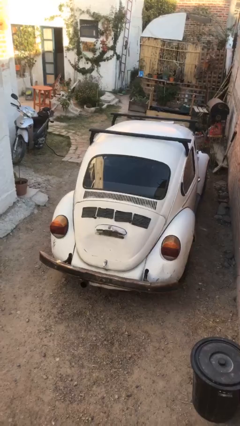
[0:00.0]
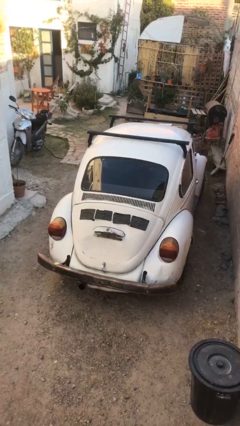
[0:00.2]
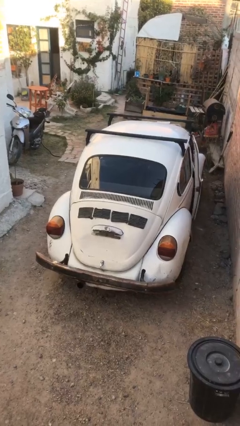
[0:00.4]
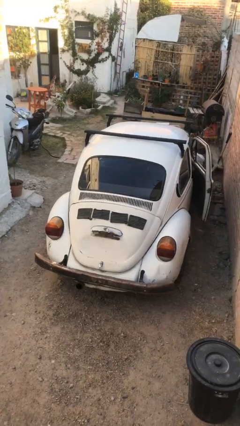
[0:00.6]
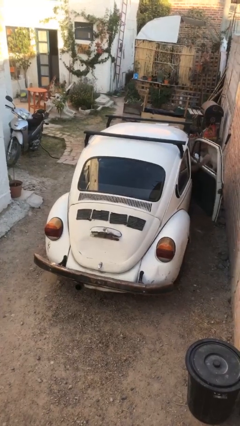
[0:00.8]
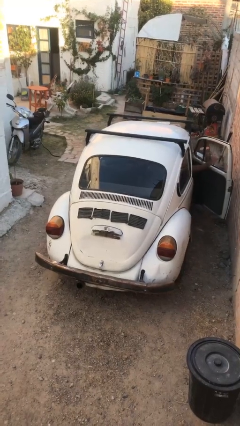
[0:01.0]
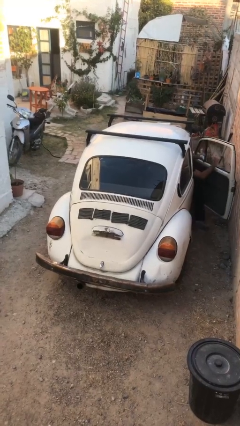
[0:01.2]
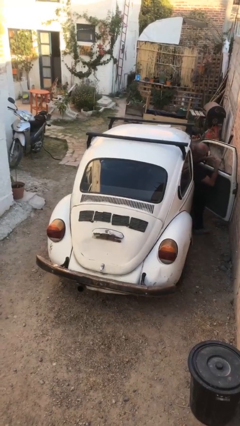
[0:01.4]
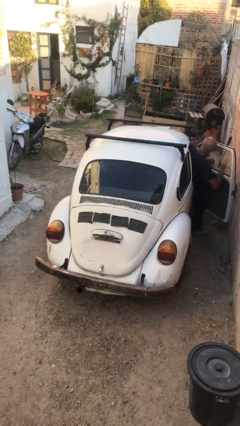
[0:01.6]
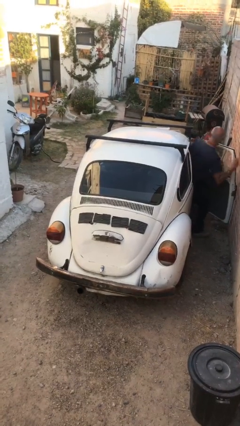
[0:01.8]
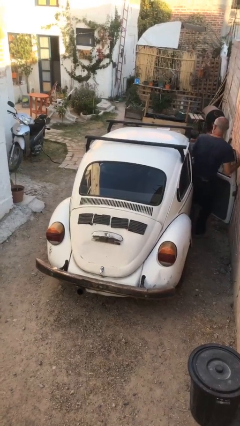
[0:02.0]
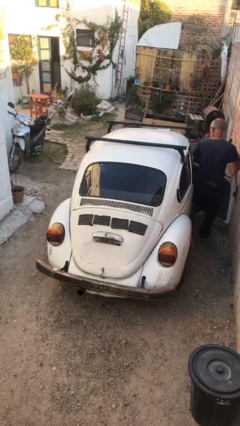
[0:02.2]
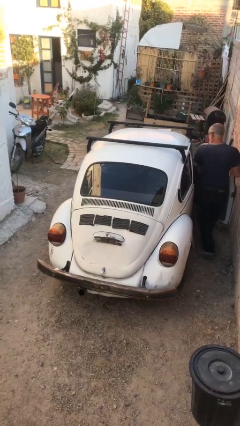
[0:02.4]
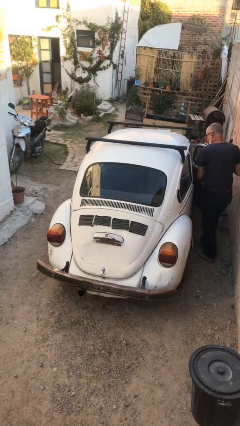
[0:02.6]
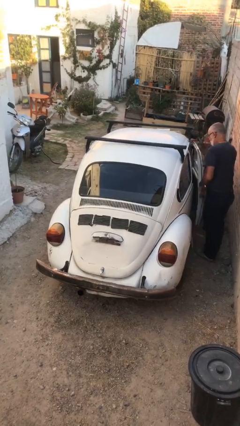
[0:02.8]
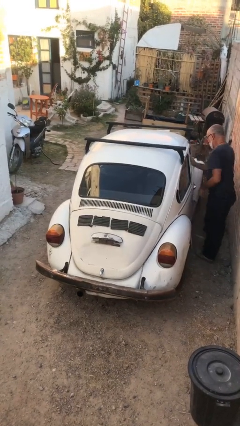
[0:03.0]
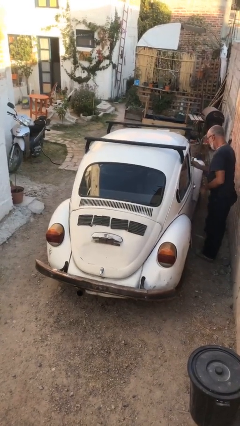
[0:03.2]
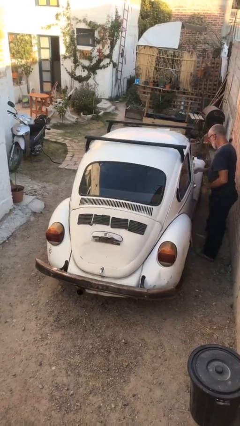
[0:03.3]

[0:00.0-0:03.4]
car drops off person

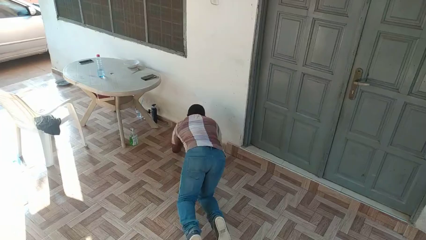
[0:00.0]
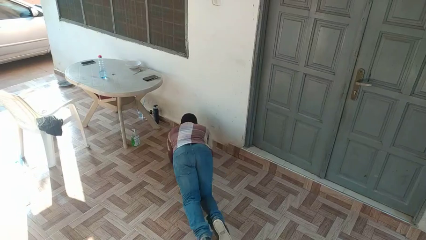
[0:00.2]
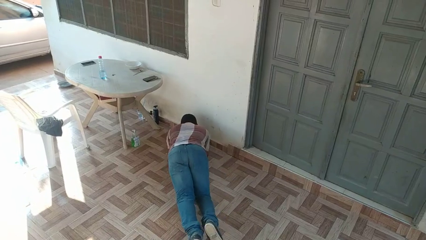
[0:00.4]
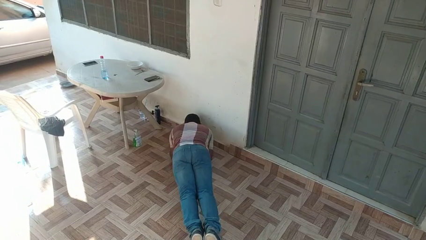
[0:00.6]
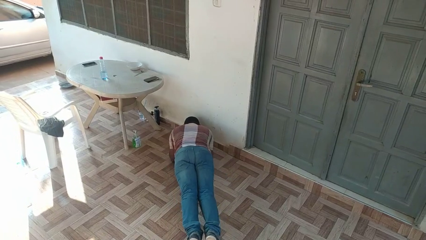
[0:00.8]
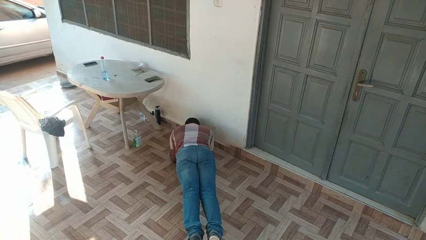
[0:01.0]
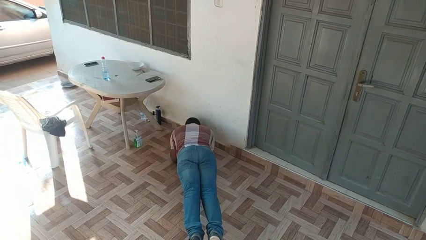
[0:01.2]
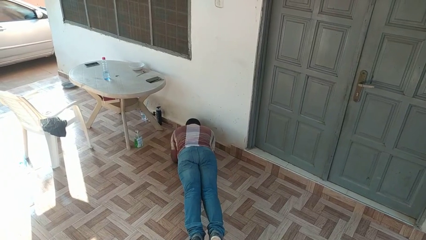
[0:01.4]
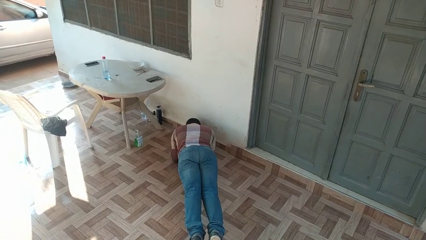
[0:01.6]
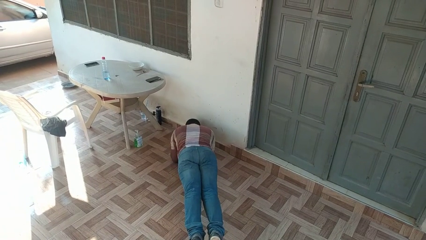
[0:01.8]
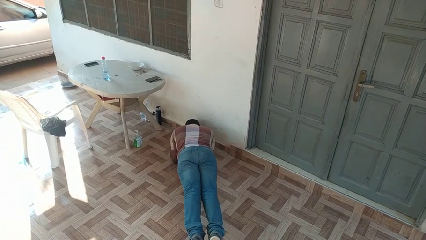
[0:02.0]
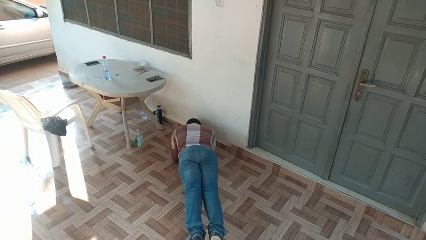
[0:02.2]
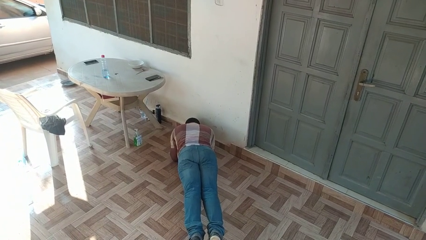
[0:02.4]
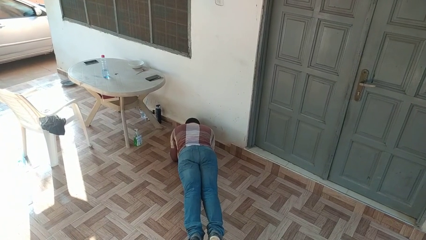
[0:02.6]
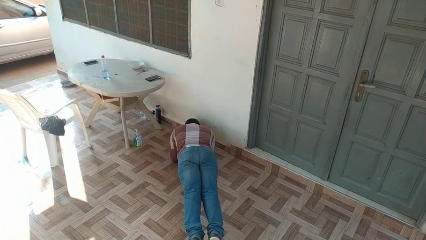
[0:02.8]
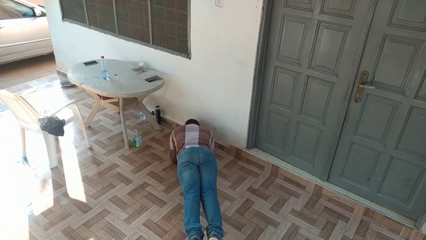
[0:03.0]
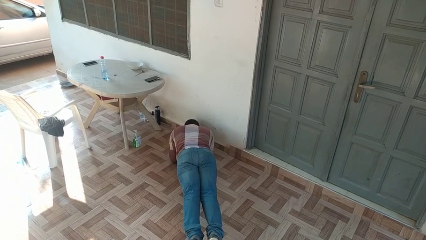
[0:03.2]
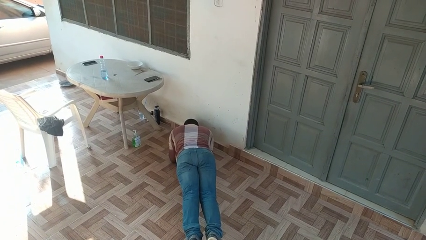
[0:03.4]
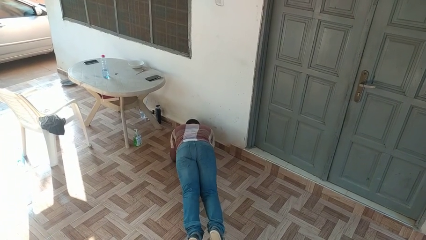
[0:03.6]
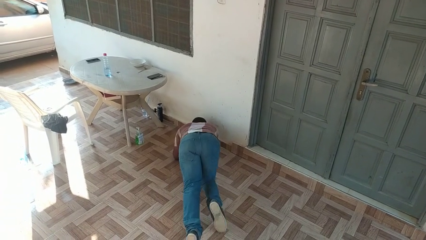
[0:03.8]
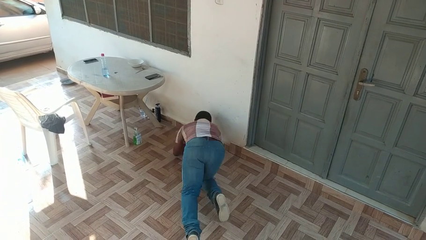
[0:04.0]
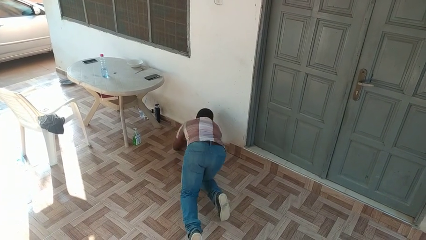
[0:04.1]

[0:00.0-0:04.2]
person exercises with plank

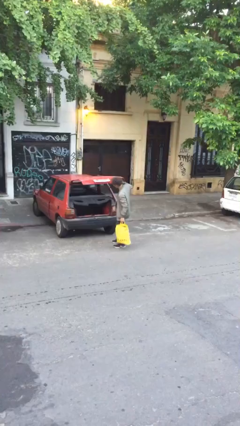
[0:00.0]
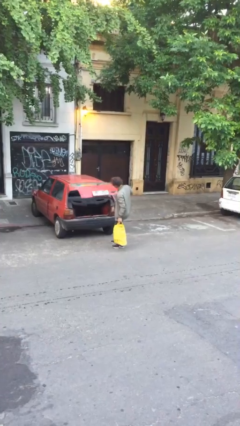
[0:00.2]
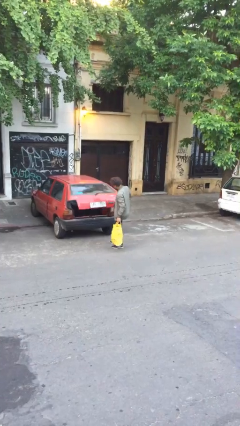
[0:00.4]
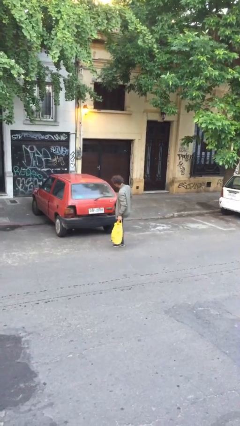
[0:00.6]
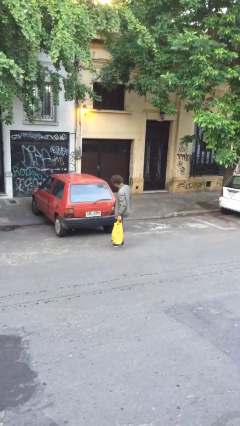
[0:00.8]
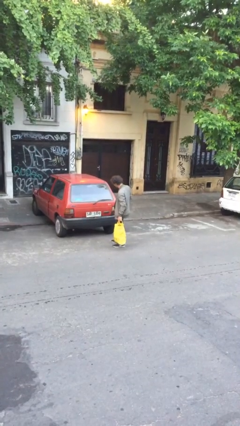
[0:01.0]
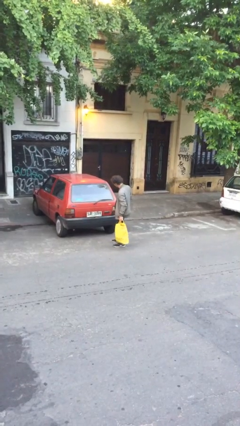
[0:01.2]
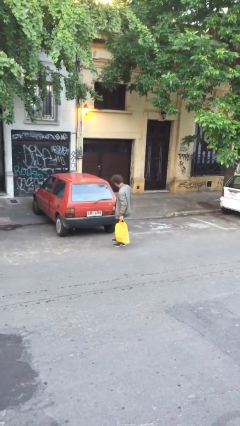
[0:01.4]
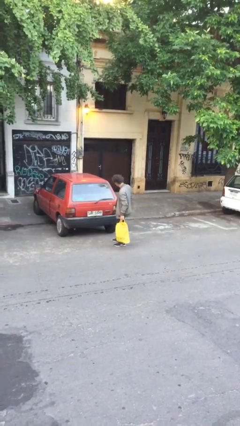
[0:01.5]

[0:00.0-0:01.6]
person closes car trunk

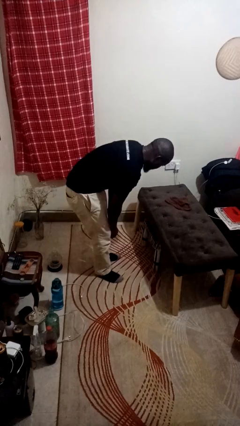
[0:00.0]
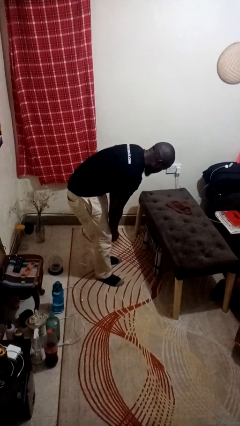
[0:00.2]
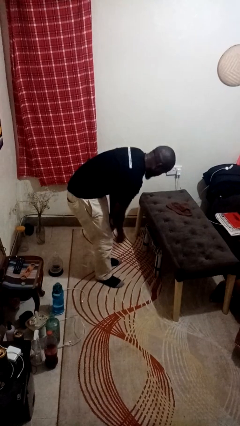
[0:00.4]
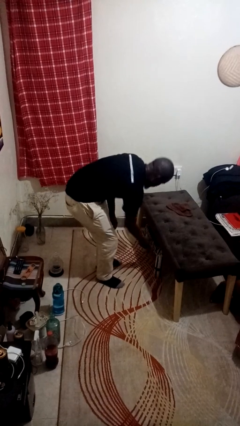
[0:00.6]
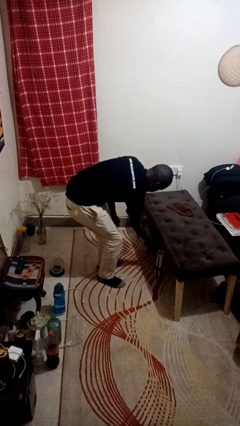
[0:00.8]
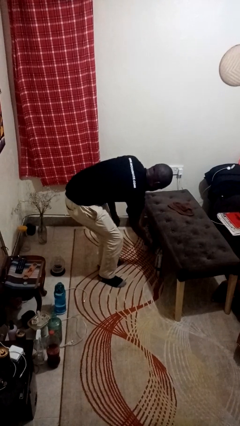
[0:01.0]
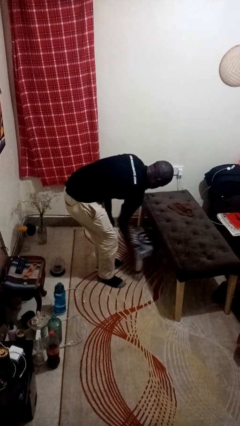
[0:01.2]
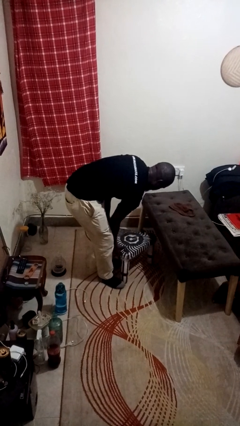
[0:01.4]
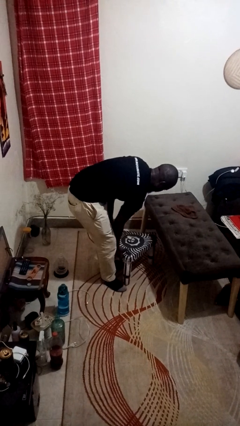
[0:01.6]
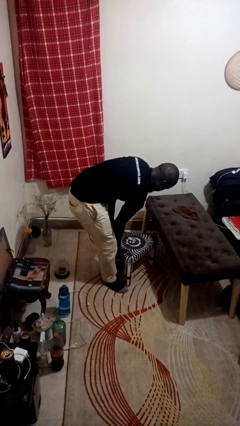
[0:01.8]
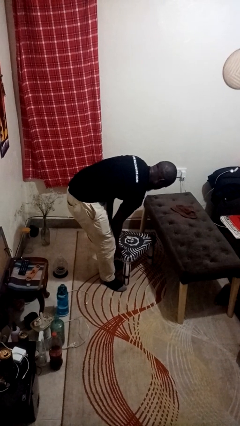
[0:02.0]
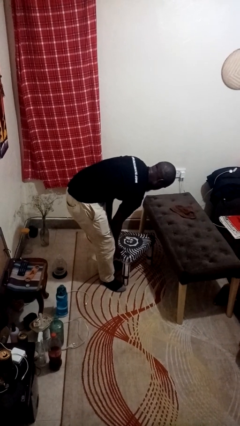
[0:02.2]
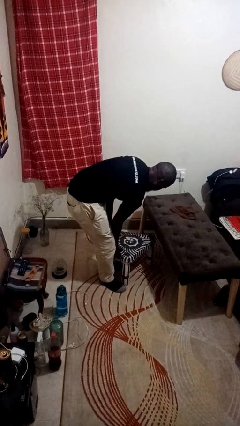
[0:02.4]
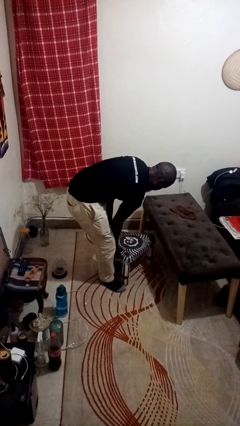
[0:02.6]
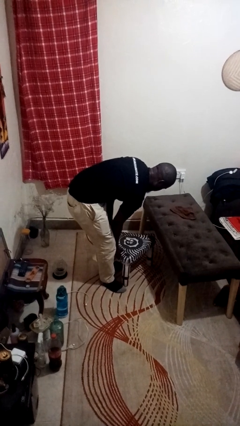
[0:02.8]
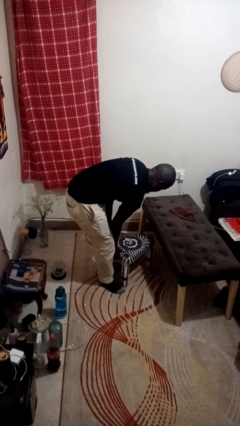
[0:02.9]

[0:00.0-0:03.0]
person pulls out chair

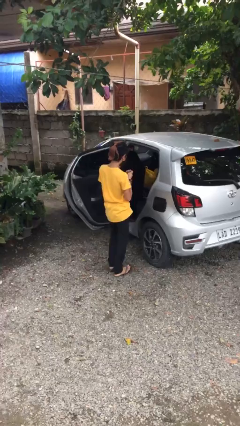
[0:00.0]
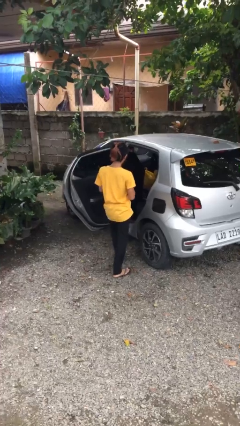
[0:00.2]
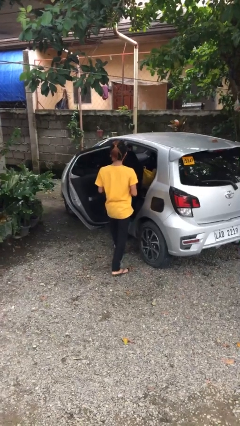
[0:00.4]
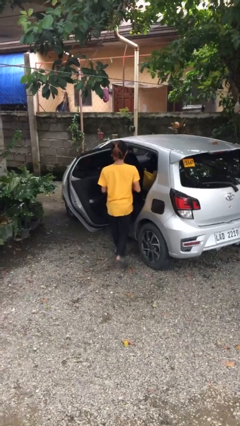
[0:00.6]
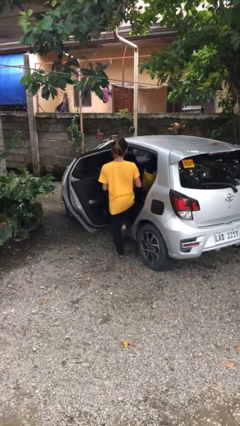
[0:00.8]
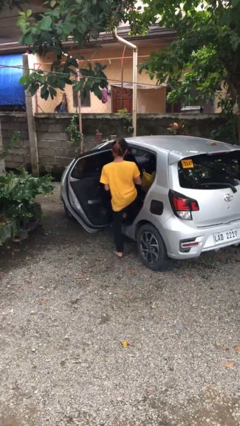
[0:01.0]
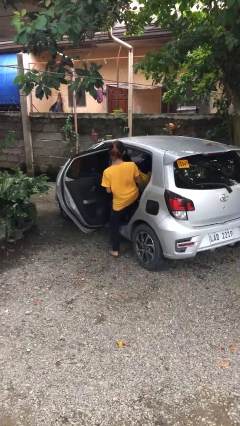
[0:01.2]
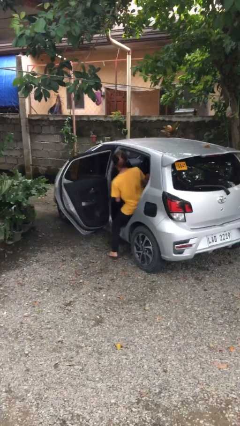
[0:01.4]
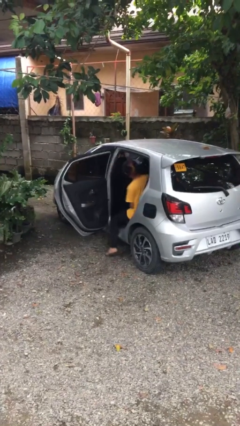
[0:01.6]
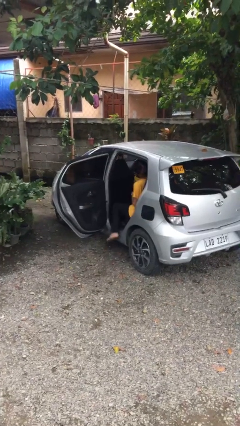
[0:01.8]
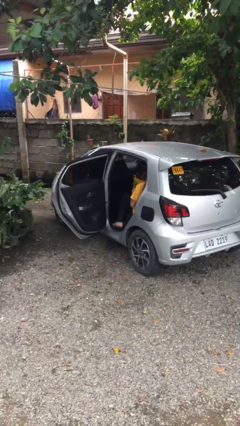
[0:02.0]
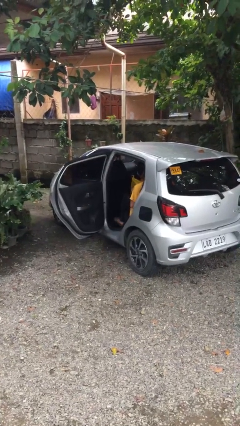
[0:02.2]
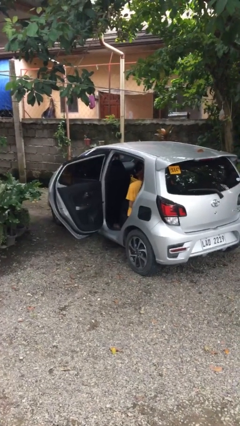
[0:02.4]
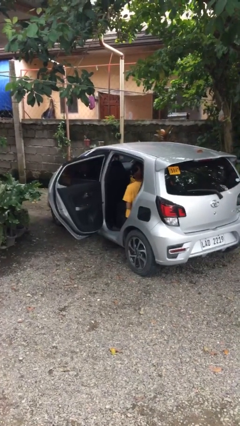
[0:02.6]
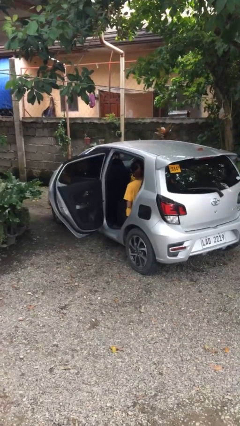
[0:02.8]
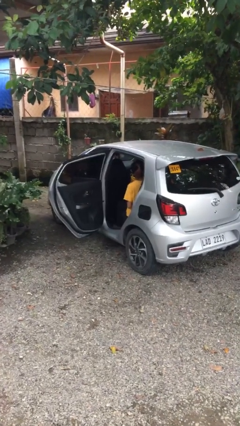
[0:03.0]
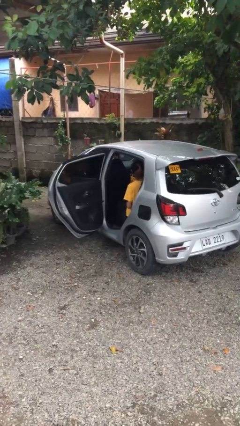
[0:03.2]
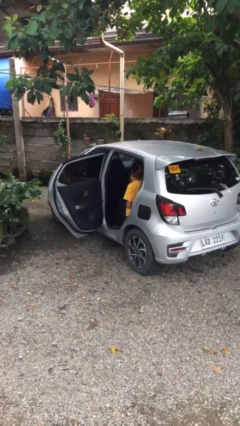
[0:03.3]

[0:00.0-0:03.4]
person enters car

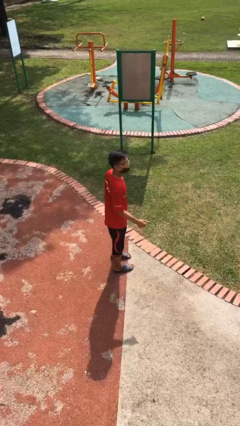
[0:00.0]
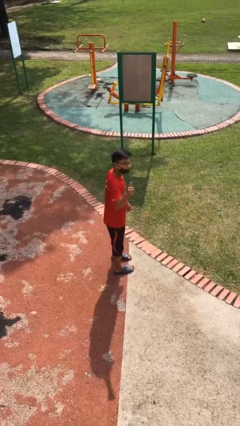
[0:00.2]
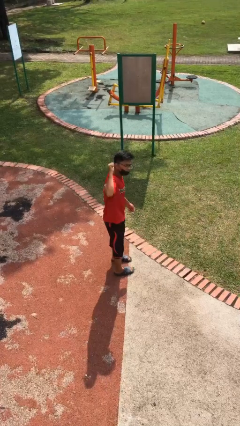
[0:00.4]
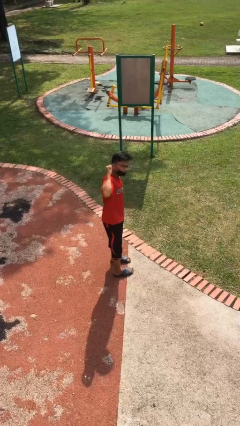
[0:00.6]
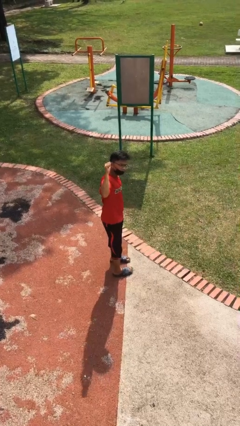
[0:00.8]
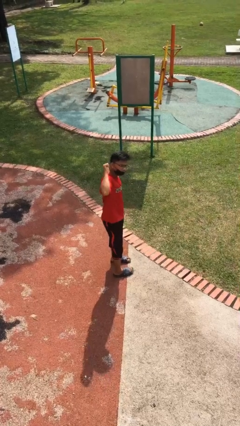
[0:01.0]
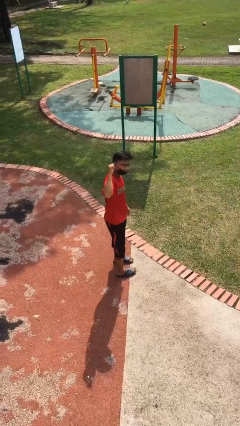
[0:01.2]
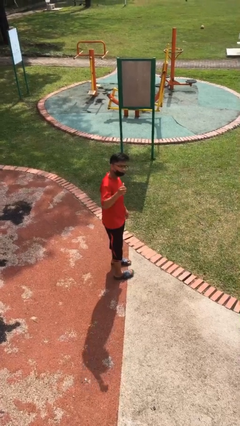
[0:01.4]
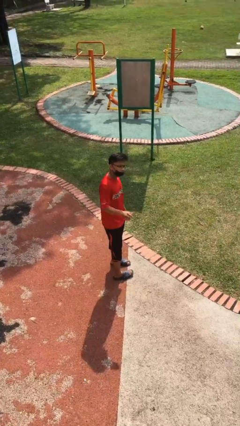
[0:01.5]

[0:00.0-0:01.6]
person gestures behind me
